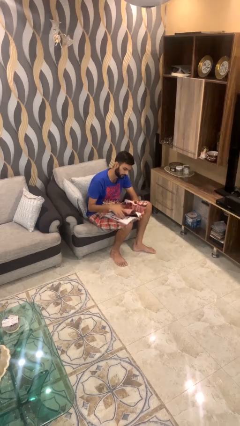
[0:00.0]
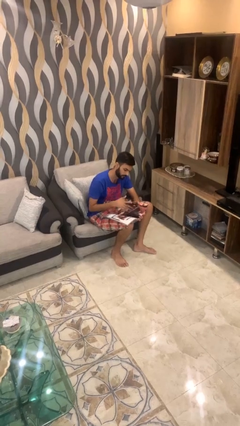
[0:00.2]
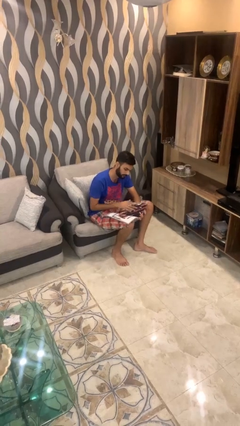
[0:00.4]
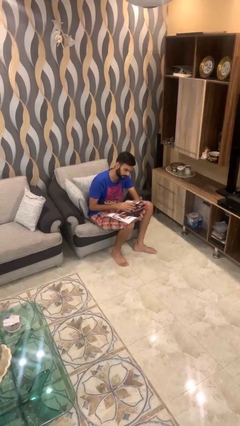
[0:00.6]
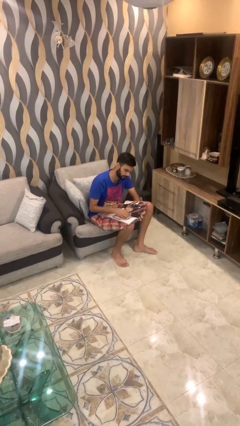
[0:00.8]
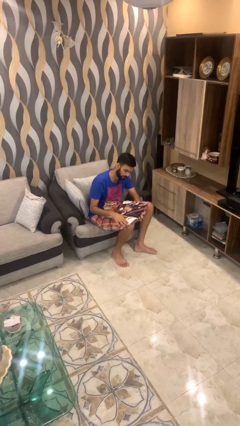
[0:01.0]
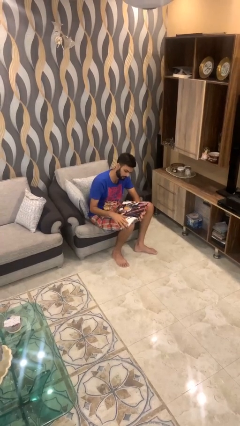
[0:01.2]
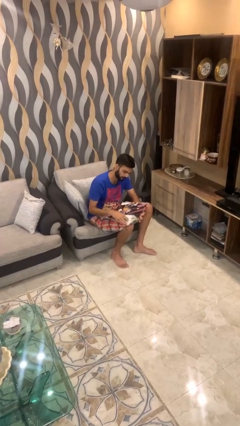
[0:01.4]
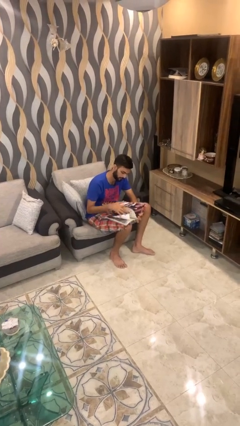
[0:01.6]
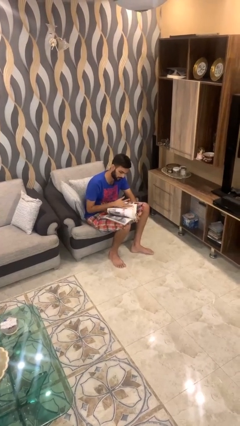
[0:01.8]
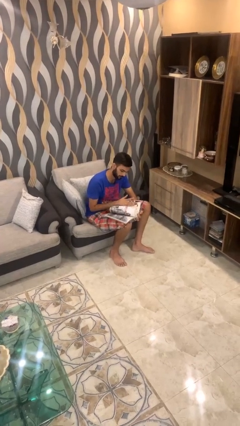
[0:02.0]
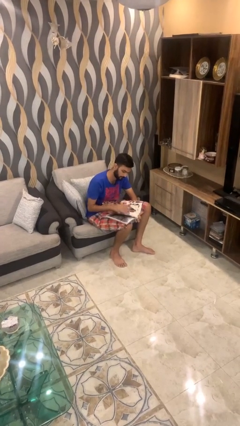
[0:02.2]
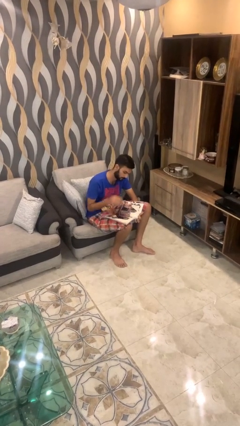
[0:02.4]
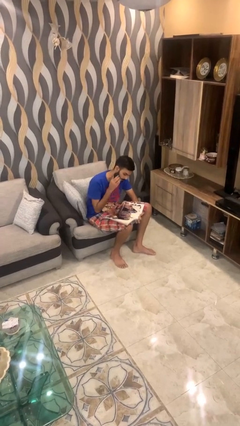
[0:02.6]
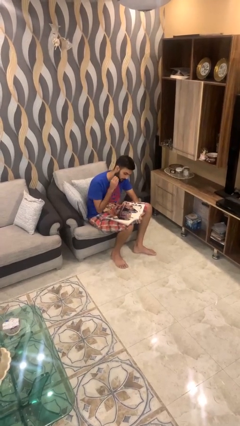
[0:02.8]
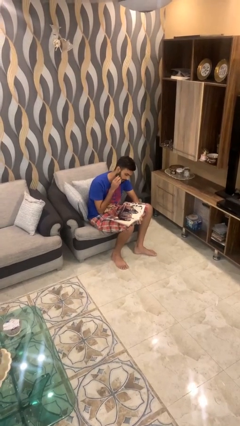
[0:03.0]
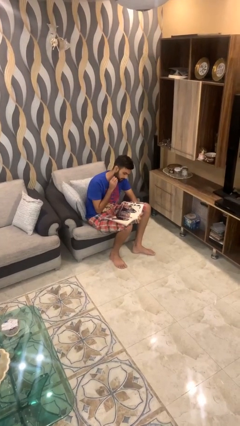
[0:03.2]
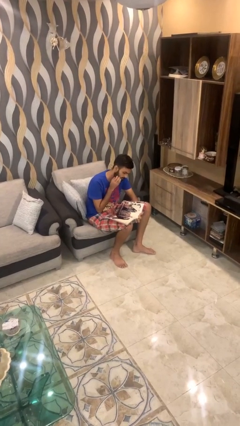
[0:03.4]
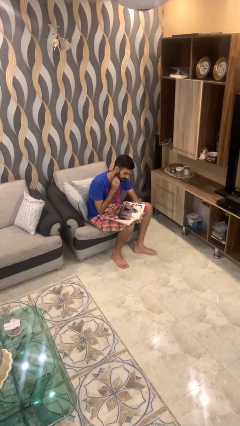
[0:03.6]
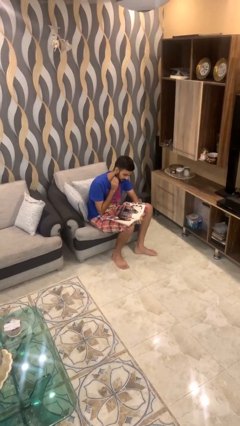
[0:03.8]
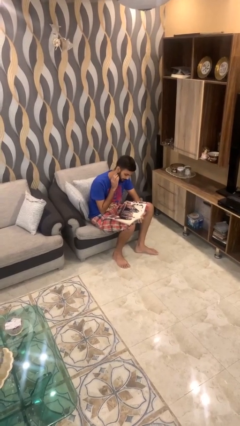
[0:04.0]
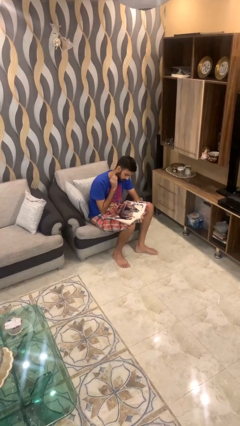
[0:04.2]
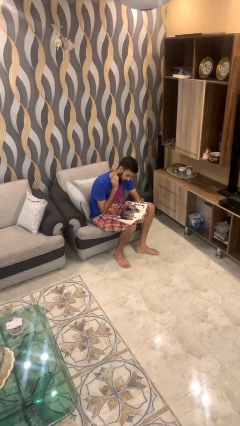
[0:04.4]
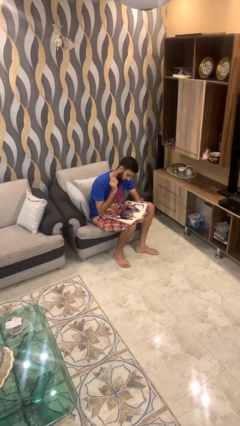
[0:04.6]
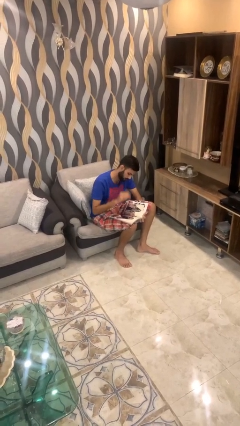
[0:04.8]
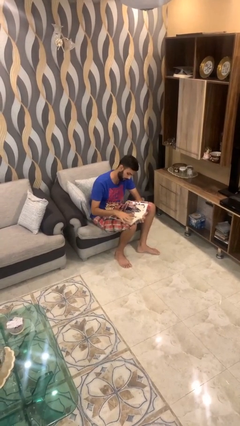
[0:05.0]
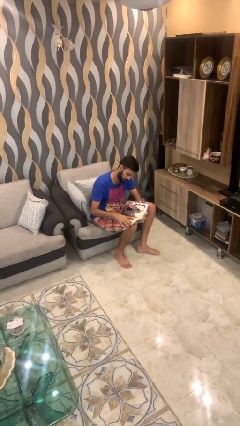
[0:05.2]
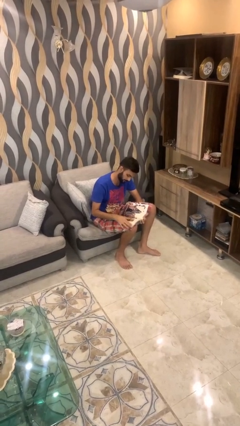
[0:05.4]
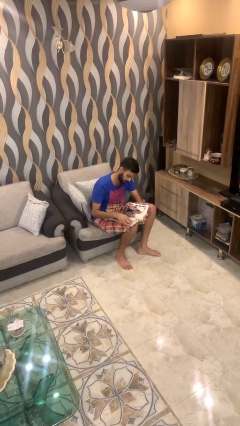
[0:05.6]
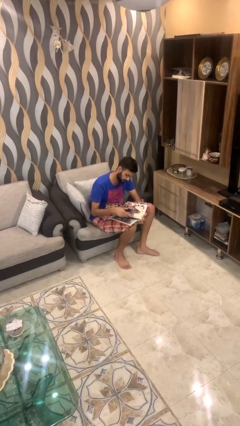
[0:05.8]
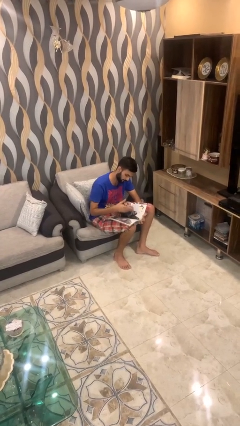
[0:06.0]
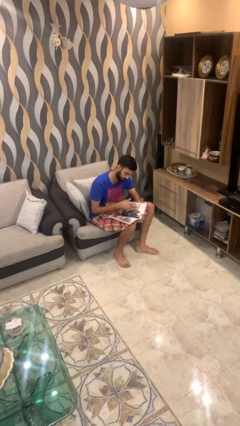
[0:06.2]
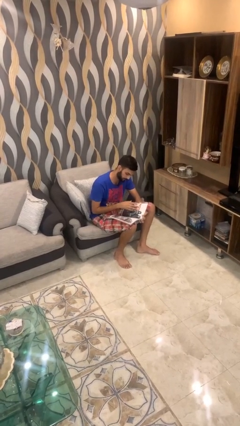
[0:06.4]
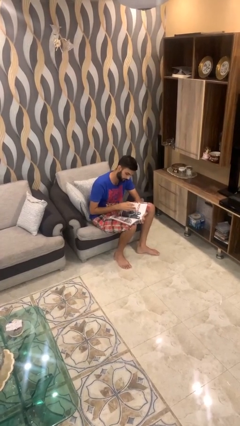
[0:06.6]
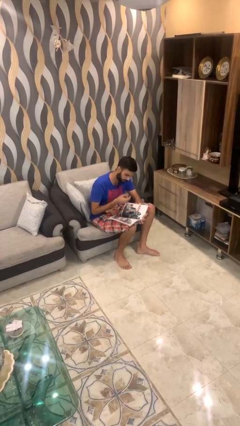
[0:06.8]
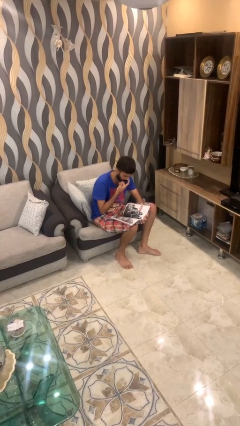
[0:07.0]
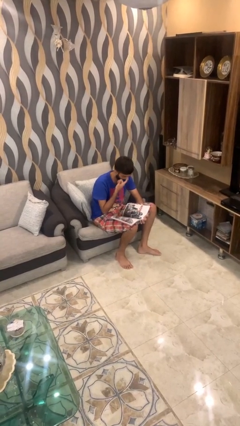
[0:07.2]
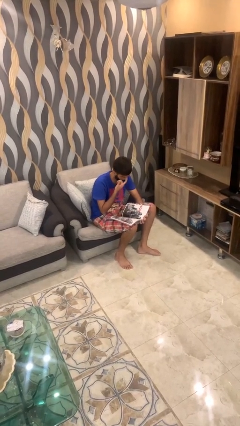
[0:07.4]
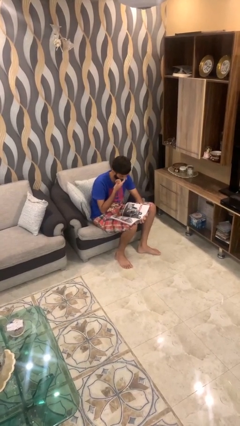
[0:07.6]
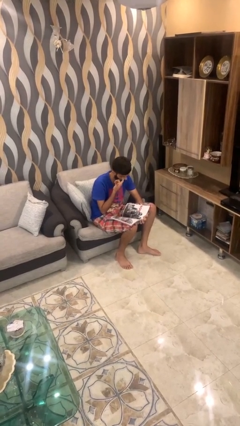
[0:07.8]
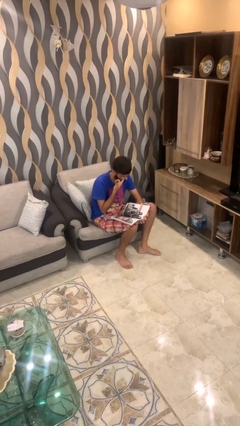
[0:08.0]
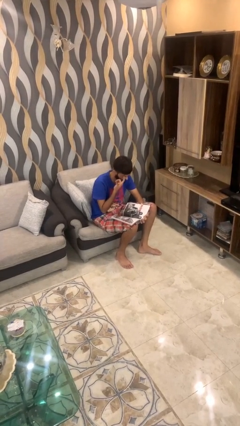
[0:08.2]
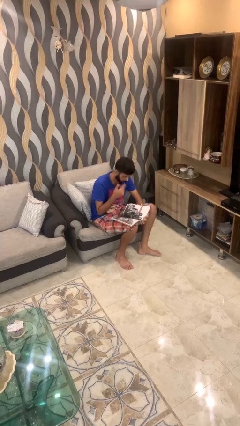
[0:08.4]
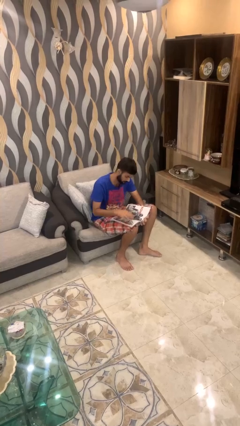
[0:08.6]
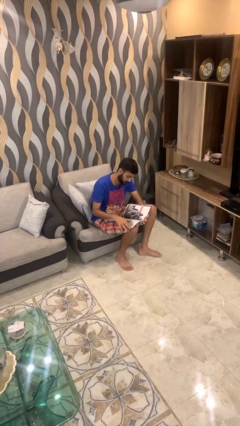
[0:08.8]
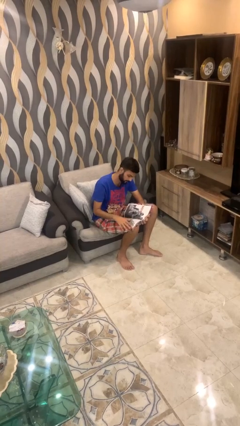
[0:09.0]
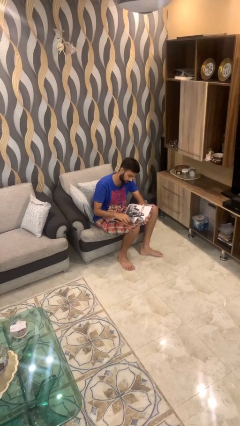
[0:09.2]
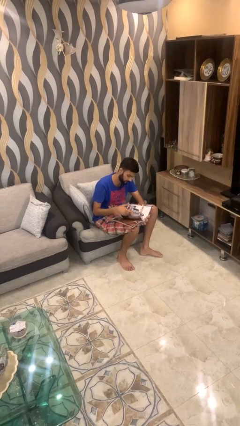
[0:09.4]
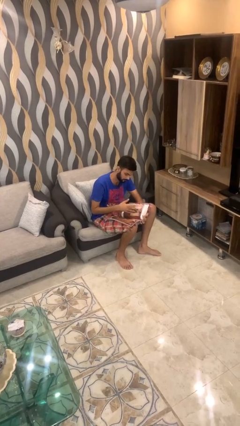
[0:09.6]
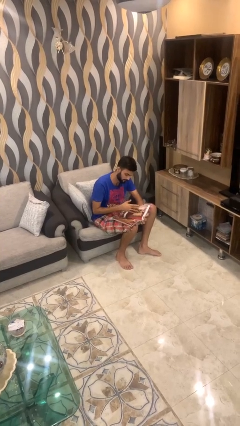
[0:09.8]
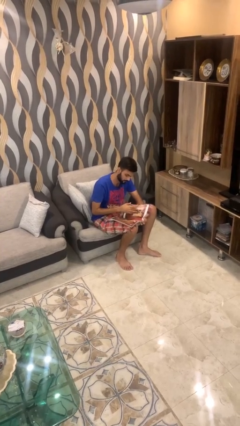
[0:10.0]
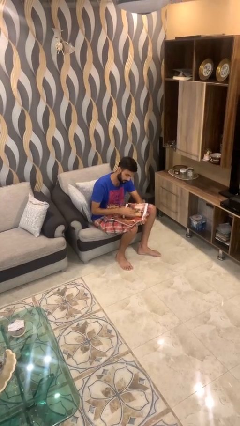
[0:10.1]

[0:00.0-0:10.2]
person reads document

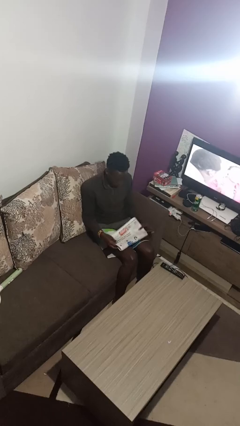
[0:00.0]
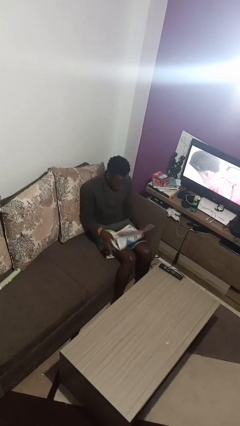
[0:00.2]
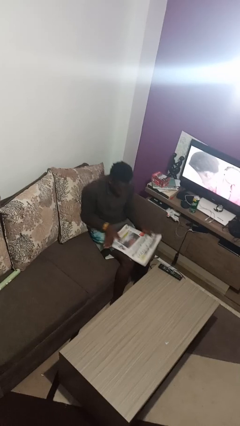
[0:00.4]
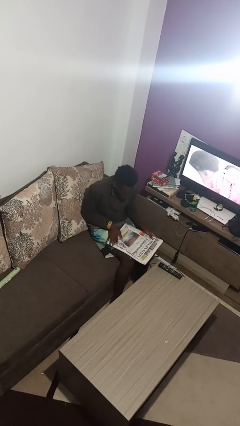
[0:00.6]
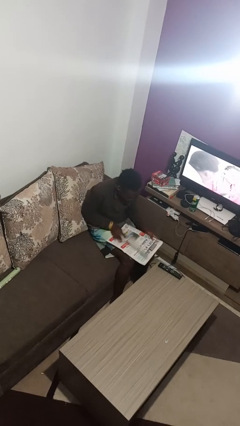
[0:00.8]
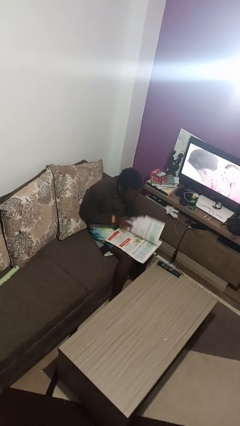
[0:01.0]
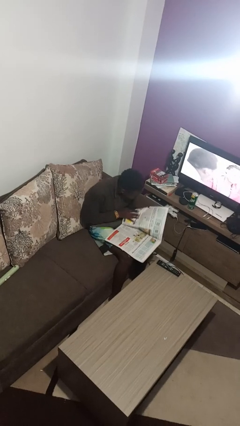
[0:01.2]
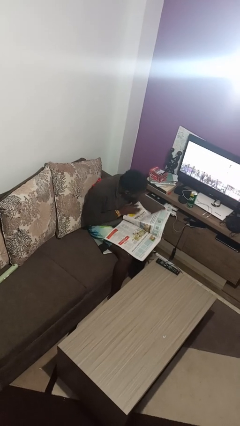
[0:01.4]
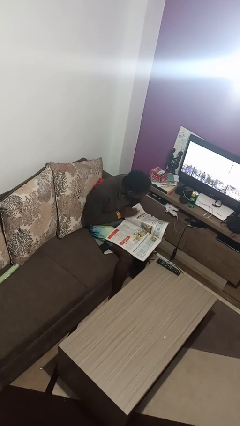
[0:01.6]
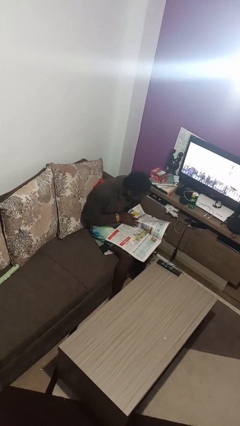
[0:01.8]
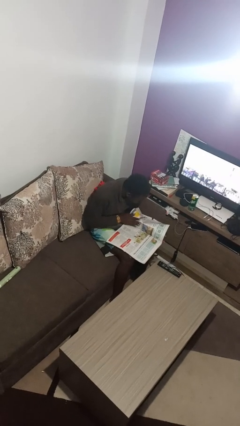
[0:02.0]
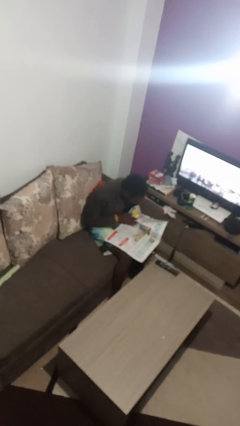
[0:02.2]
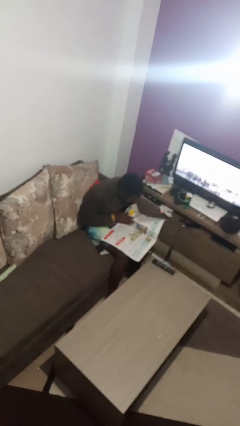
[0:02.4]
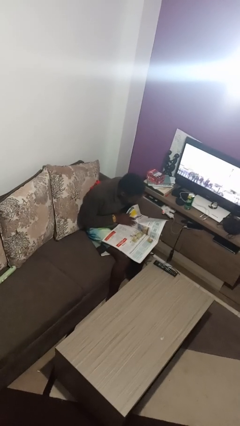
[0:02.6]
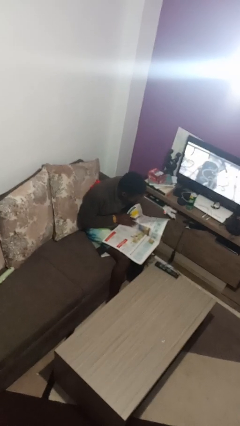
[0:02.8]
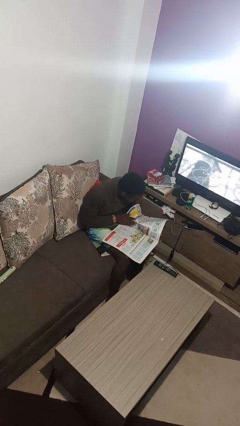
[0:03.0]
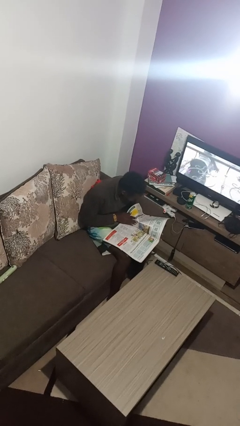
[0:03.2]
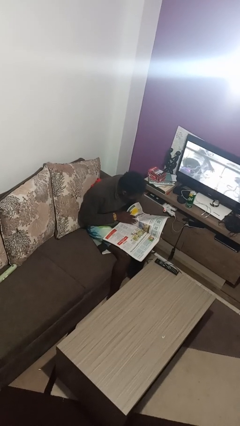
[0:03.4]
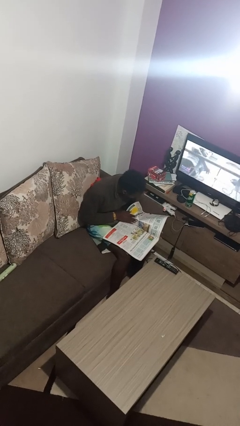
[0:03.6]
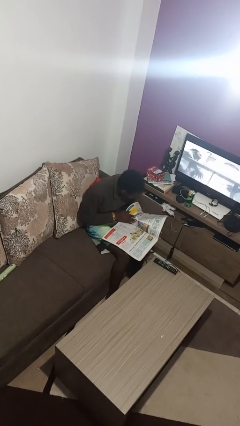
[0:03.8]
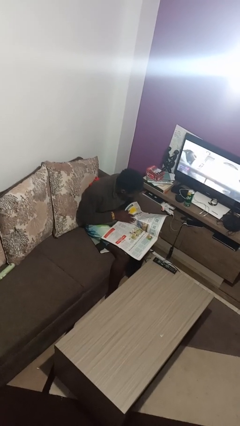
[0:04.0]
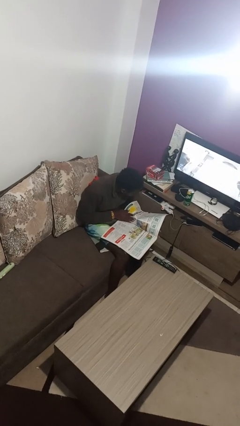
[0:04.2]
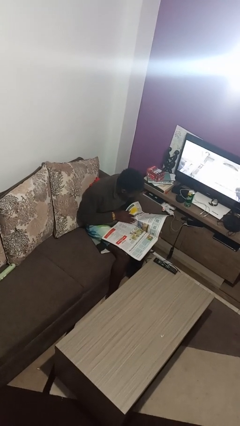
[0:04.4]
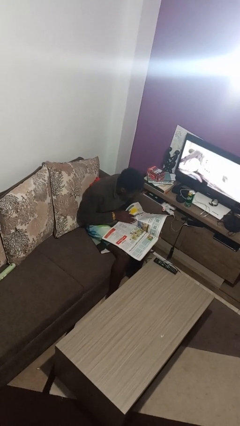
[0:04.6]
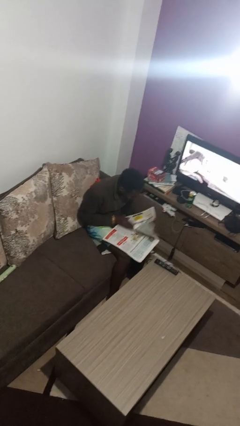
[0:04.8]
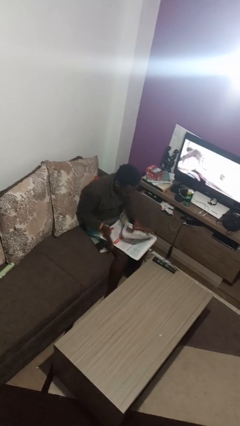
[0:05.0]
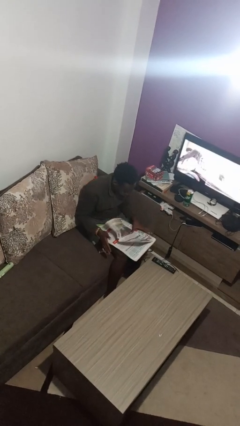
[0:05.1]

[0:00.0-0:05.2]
person reads newspaper

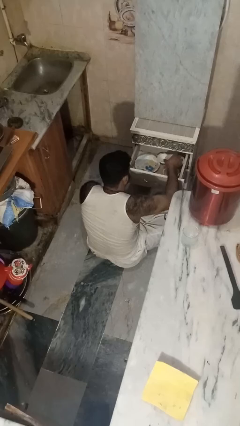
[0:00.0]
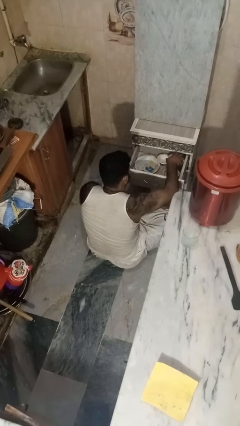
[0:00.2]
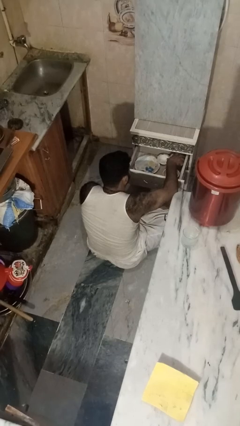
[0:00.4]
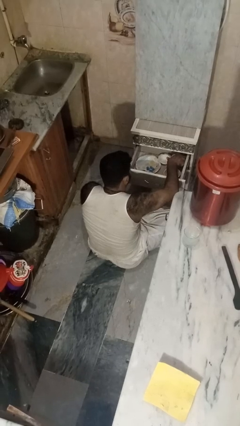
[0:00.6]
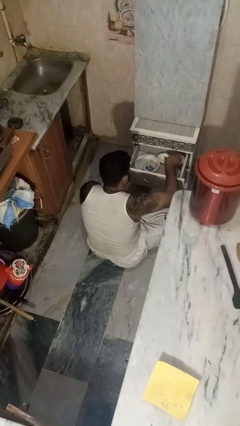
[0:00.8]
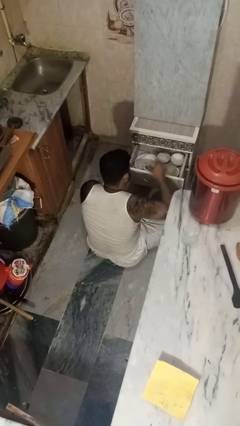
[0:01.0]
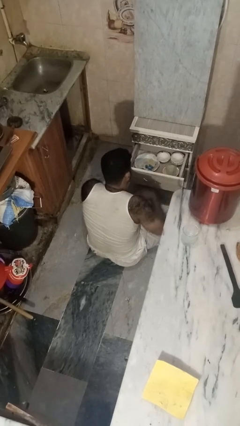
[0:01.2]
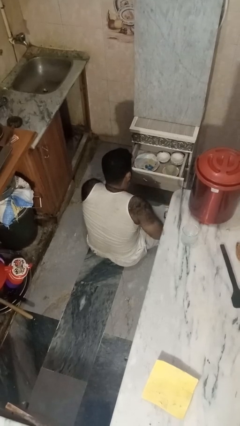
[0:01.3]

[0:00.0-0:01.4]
person puts object into kitchen drawer

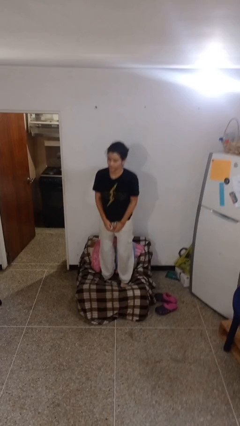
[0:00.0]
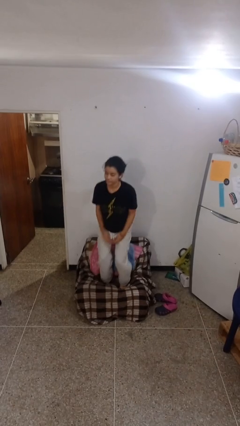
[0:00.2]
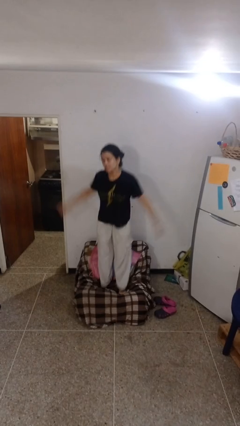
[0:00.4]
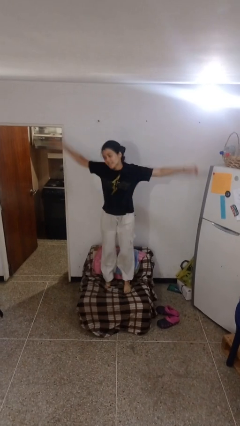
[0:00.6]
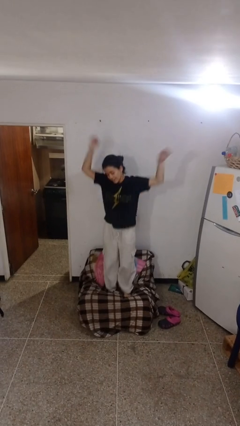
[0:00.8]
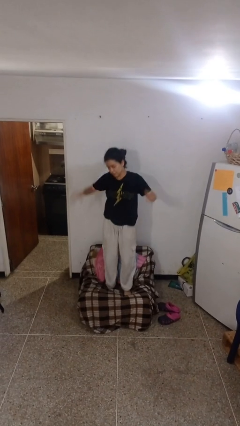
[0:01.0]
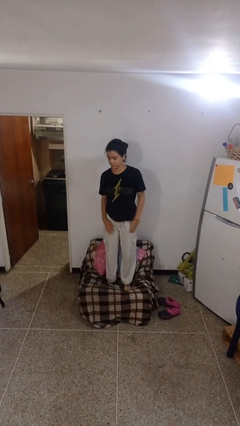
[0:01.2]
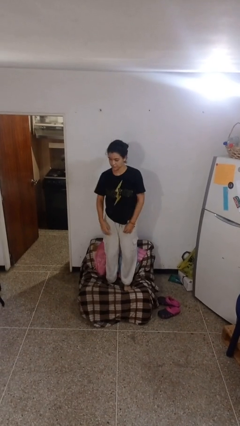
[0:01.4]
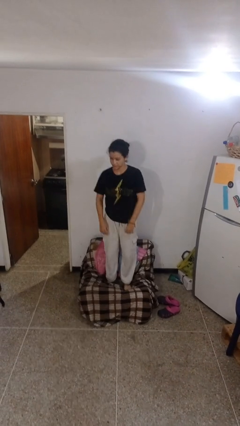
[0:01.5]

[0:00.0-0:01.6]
person jumps on couch
